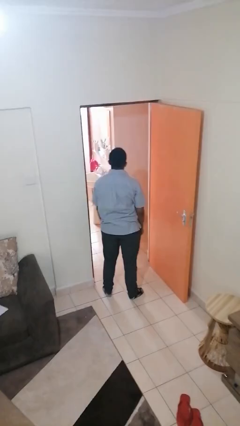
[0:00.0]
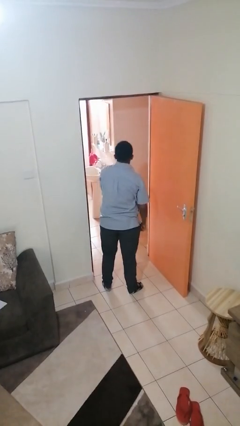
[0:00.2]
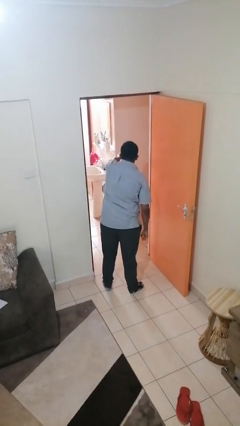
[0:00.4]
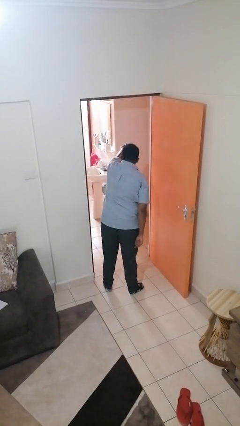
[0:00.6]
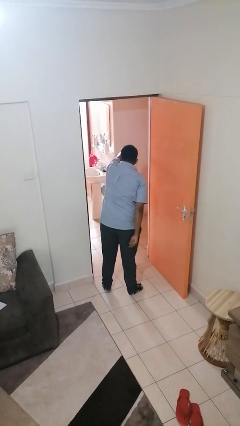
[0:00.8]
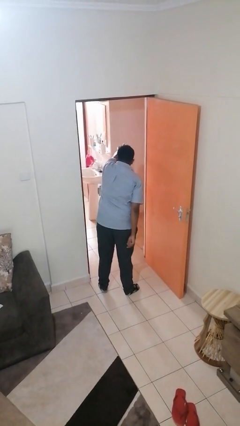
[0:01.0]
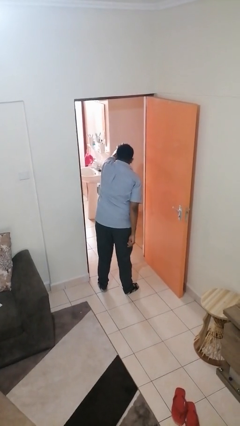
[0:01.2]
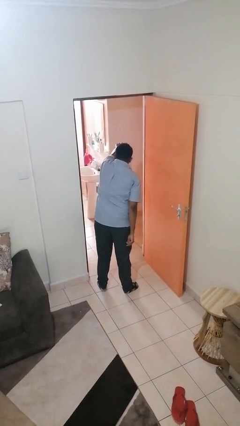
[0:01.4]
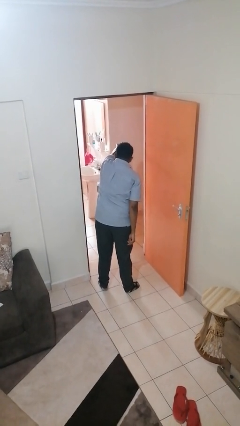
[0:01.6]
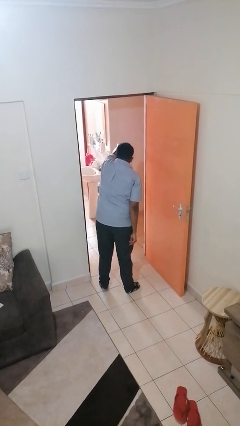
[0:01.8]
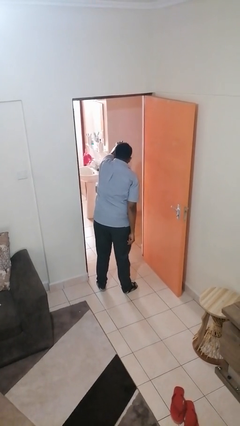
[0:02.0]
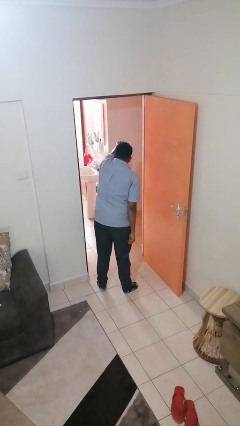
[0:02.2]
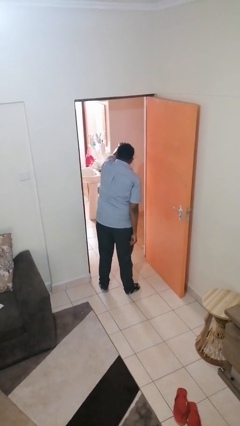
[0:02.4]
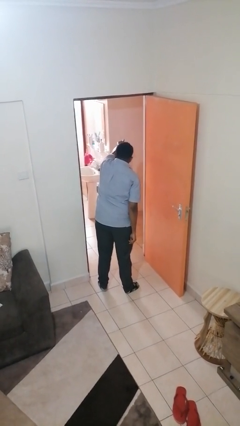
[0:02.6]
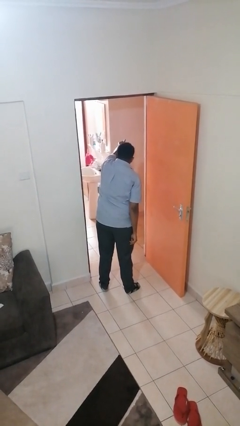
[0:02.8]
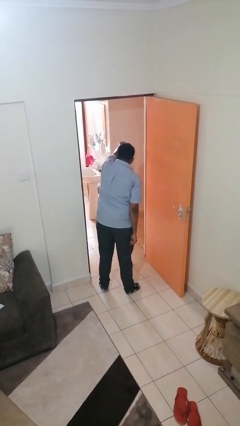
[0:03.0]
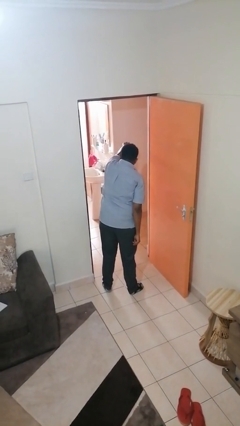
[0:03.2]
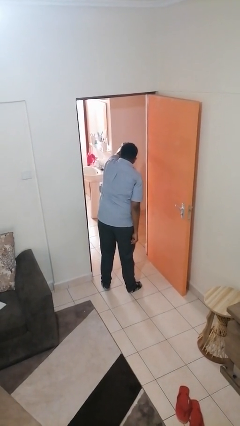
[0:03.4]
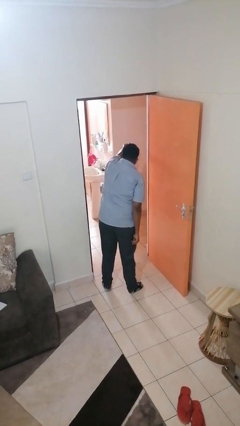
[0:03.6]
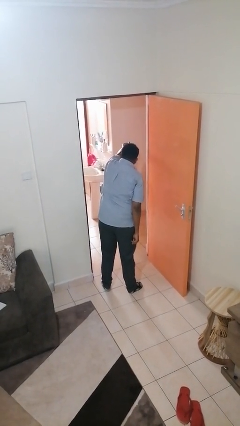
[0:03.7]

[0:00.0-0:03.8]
person points at person

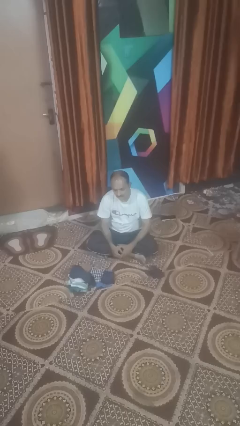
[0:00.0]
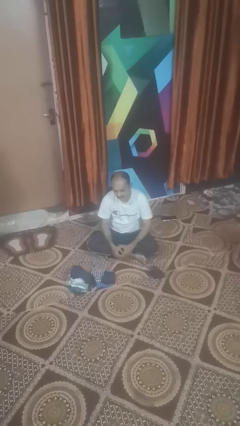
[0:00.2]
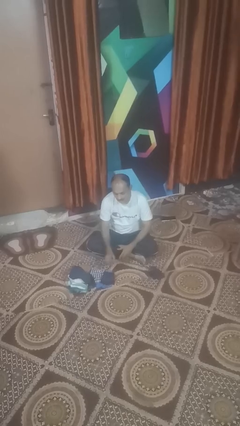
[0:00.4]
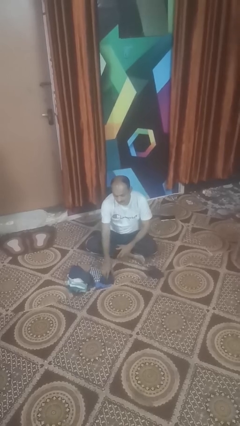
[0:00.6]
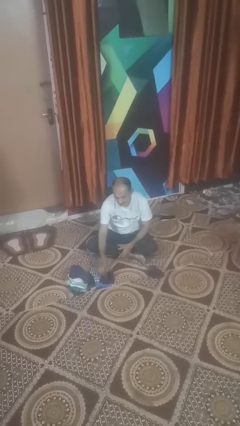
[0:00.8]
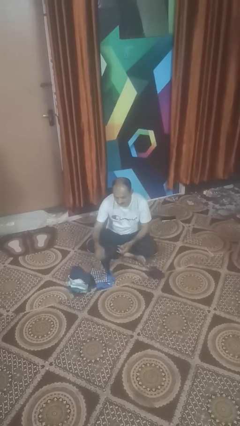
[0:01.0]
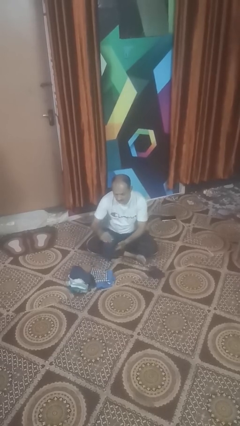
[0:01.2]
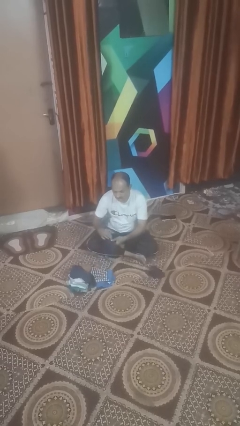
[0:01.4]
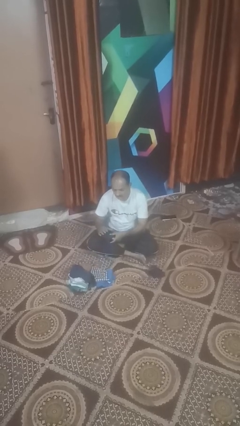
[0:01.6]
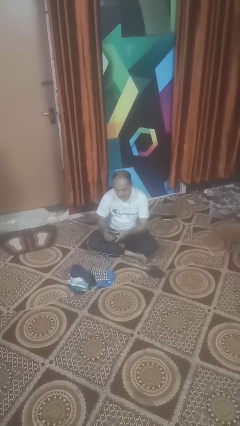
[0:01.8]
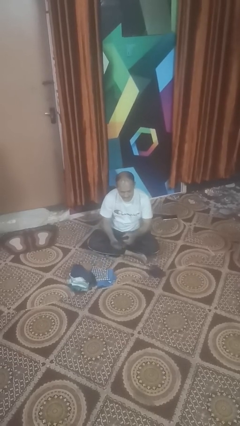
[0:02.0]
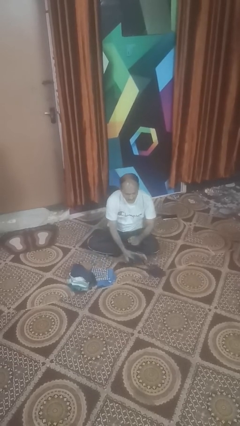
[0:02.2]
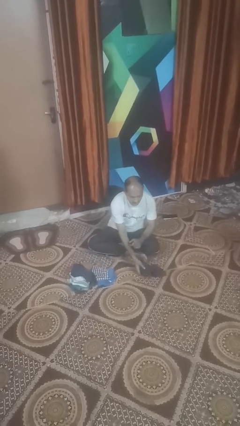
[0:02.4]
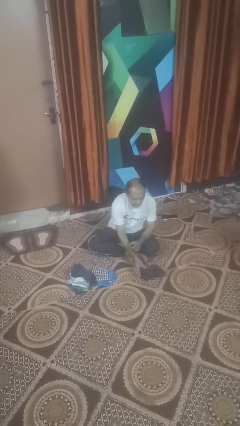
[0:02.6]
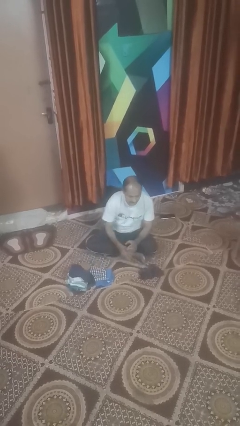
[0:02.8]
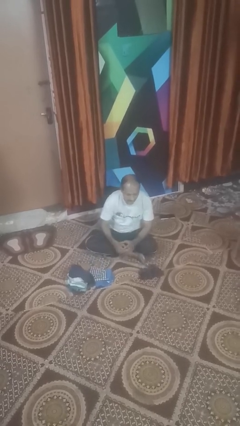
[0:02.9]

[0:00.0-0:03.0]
person folds socks

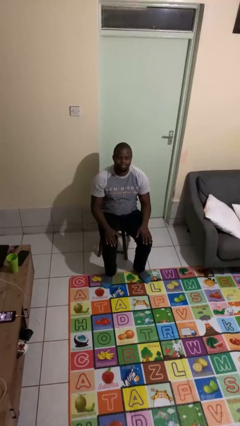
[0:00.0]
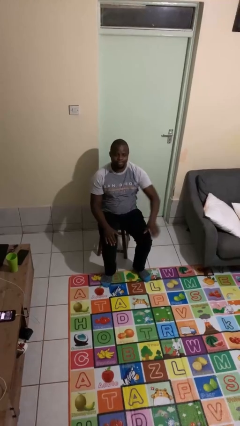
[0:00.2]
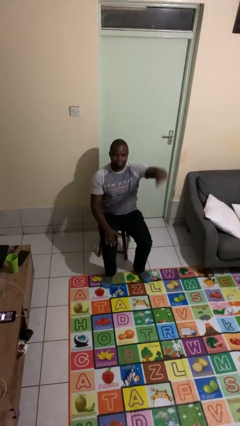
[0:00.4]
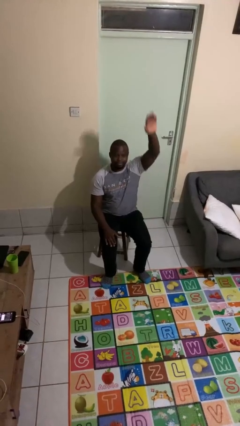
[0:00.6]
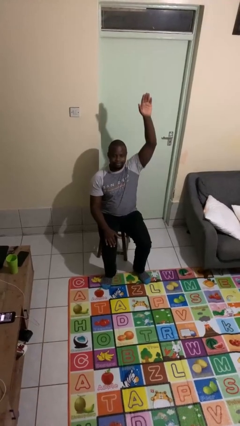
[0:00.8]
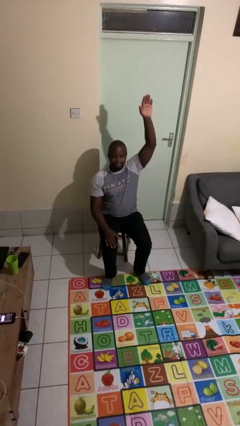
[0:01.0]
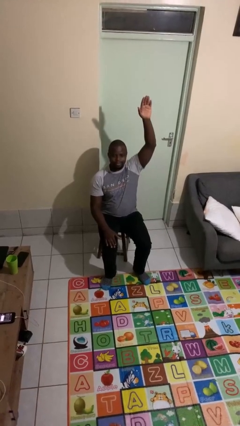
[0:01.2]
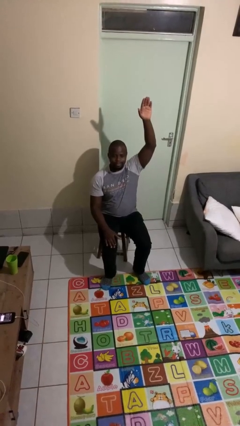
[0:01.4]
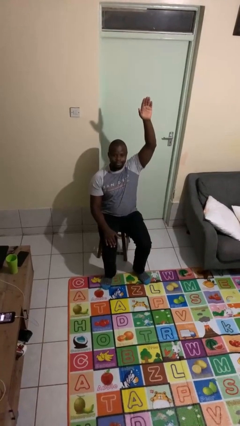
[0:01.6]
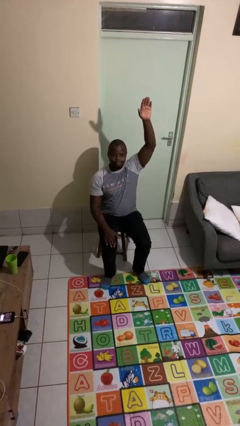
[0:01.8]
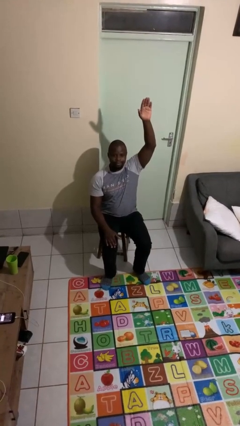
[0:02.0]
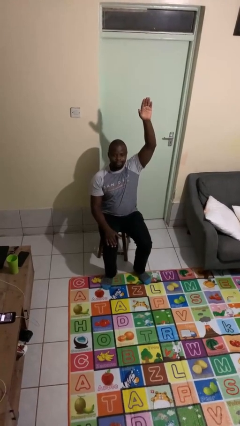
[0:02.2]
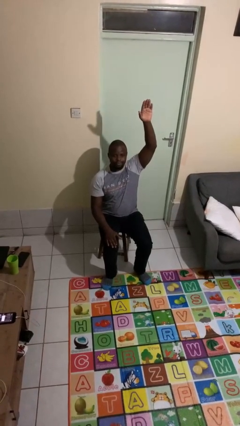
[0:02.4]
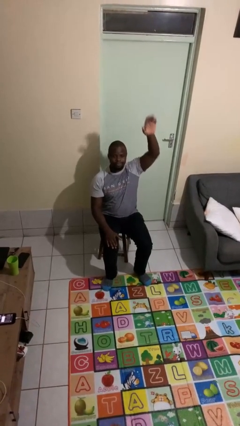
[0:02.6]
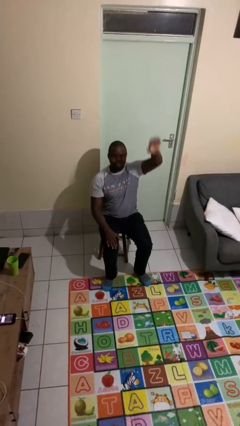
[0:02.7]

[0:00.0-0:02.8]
person gestures raise hand

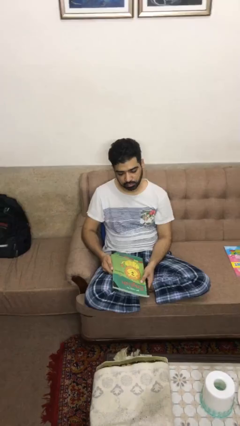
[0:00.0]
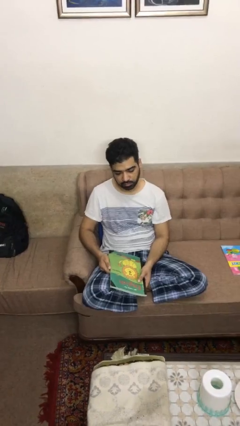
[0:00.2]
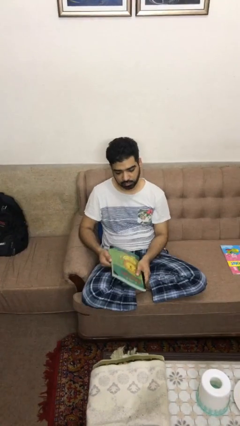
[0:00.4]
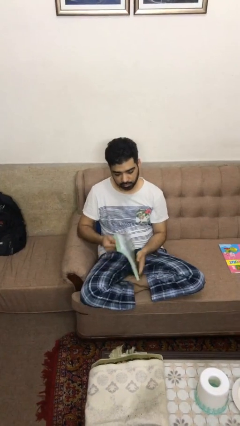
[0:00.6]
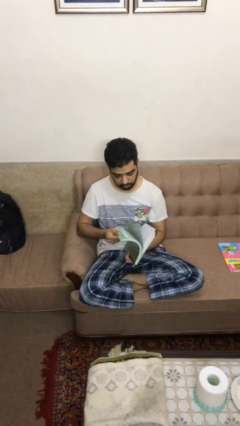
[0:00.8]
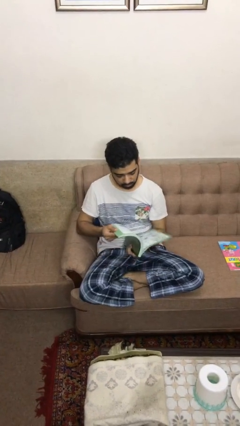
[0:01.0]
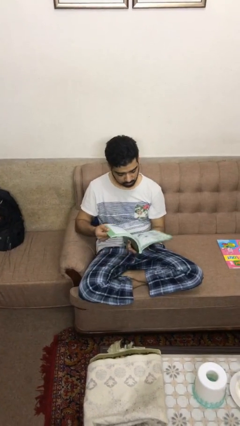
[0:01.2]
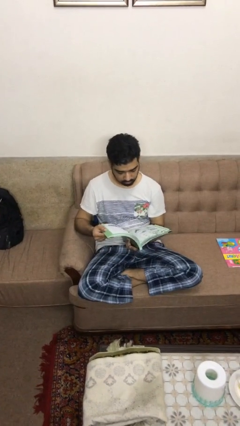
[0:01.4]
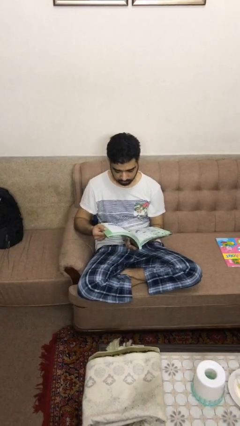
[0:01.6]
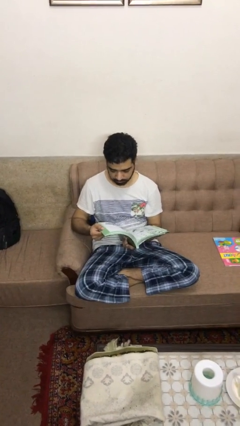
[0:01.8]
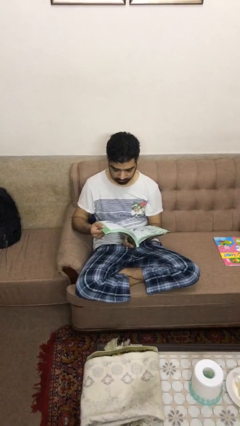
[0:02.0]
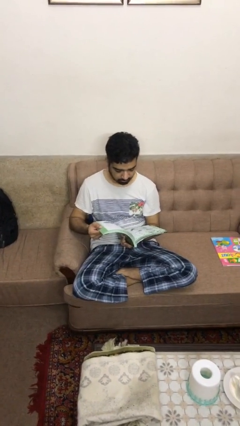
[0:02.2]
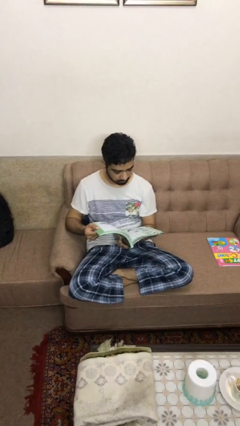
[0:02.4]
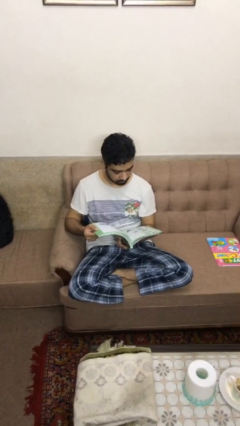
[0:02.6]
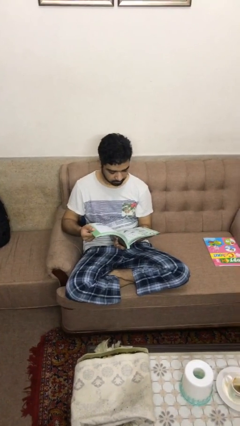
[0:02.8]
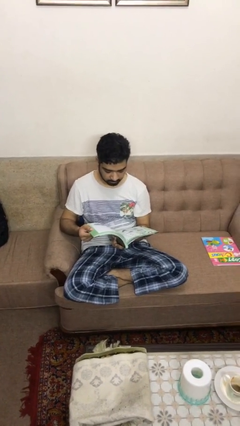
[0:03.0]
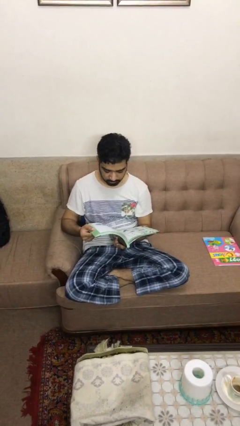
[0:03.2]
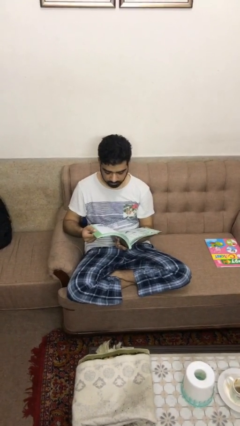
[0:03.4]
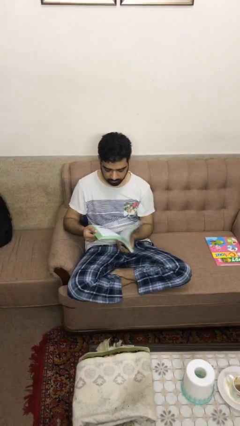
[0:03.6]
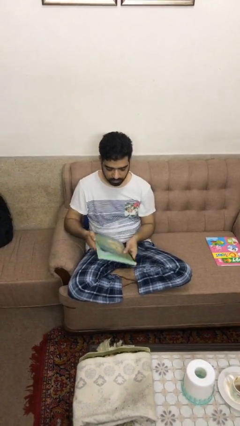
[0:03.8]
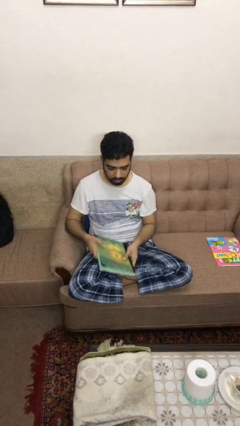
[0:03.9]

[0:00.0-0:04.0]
person reads book

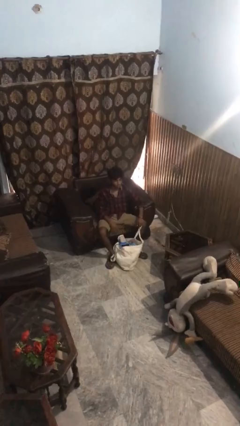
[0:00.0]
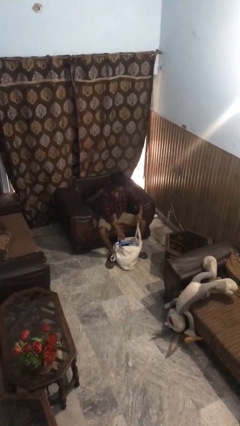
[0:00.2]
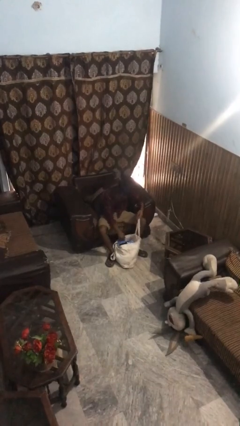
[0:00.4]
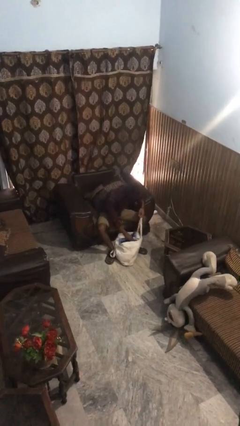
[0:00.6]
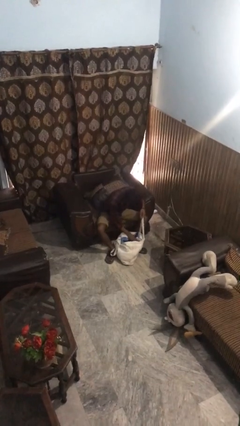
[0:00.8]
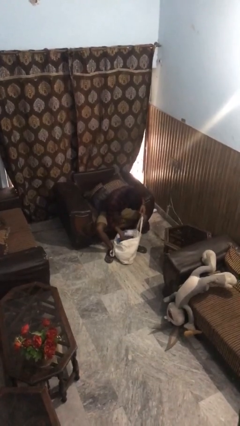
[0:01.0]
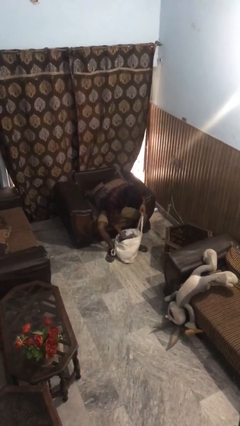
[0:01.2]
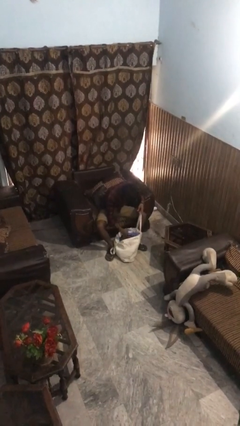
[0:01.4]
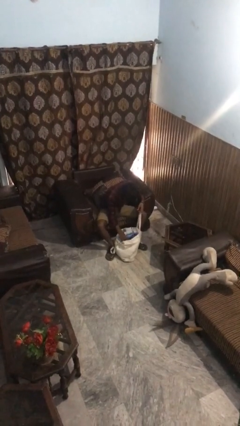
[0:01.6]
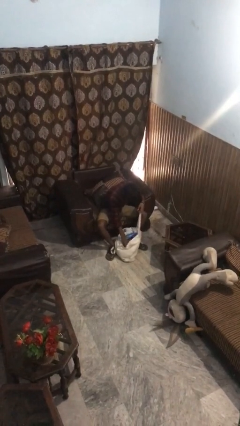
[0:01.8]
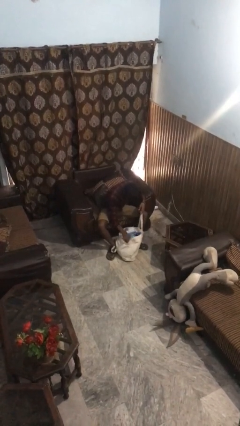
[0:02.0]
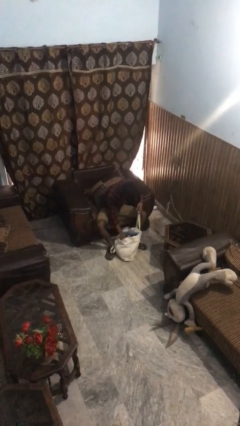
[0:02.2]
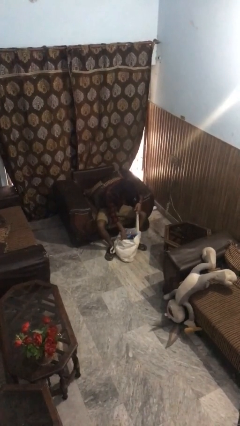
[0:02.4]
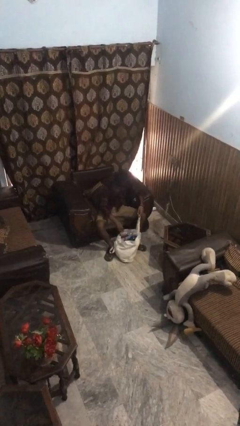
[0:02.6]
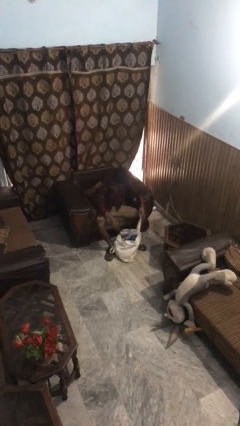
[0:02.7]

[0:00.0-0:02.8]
person searches in bag

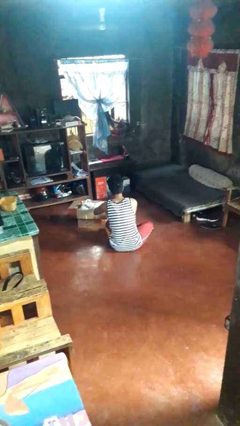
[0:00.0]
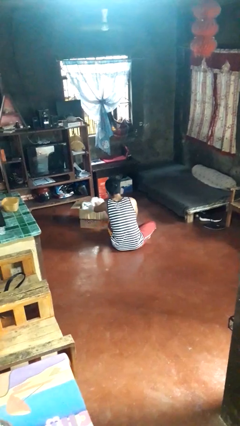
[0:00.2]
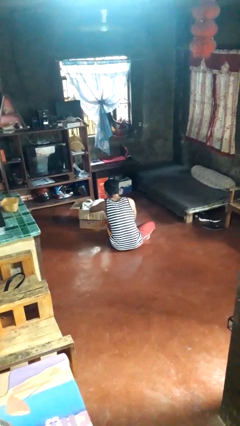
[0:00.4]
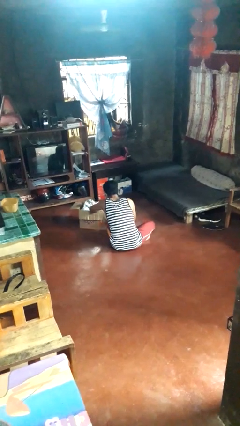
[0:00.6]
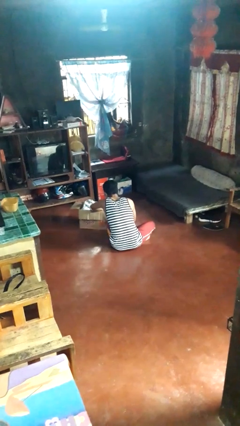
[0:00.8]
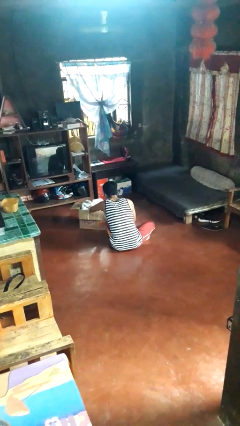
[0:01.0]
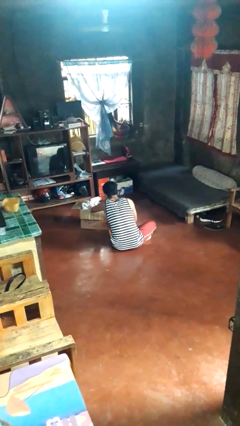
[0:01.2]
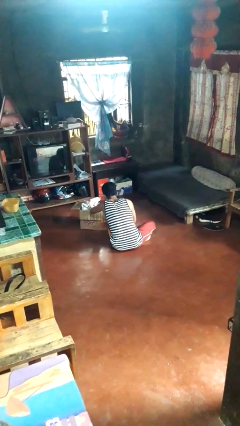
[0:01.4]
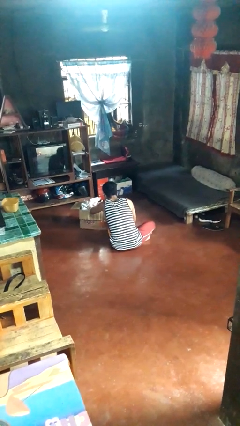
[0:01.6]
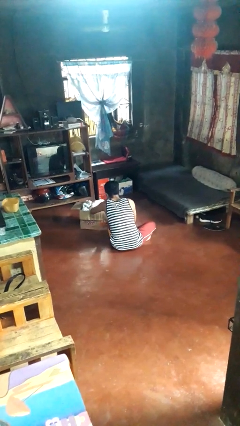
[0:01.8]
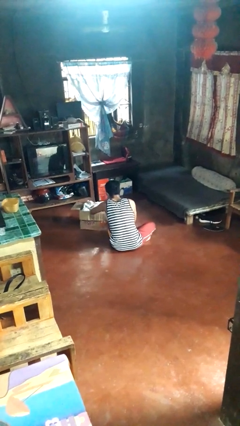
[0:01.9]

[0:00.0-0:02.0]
person searches in box
